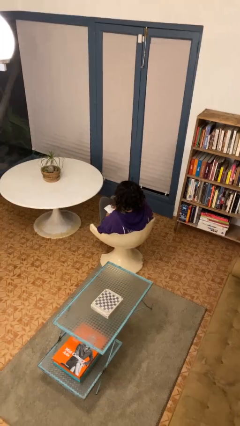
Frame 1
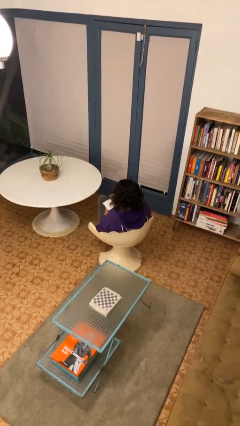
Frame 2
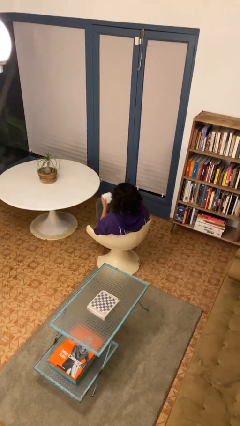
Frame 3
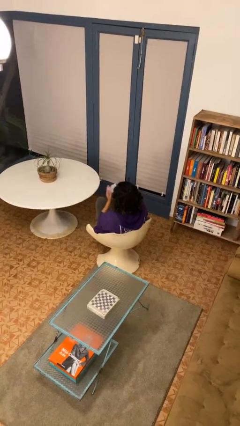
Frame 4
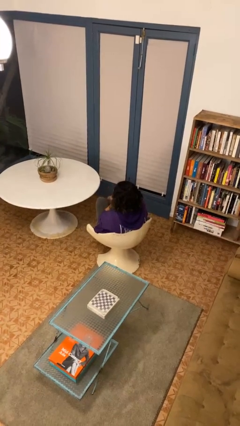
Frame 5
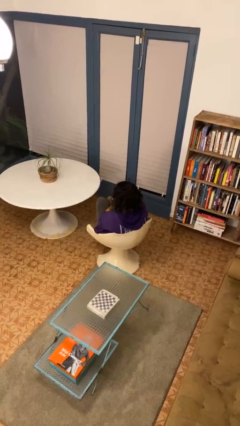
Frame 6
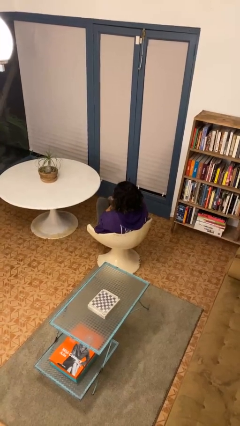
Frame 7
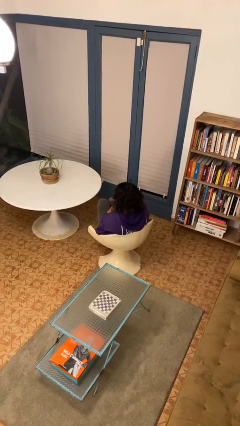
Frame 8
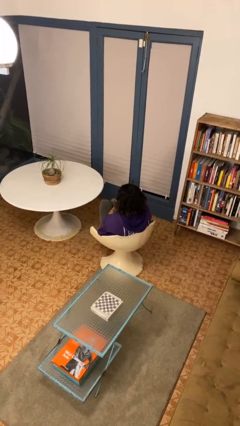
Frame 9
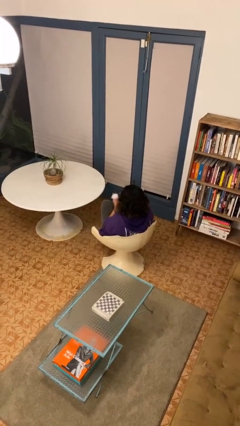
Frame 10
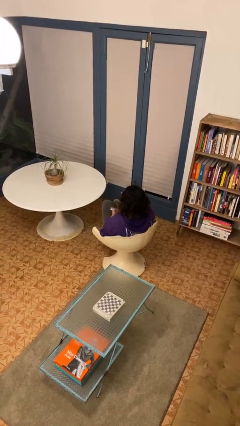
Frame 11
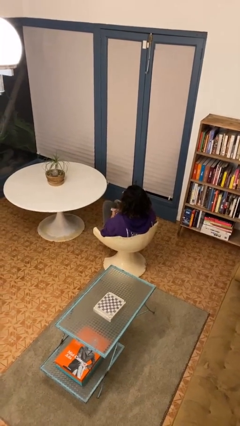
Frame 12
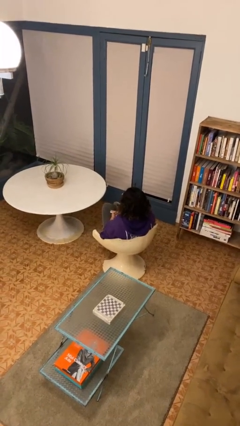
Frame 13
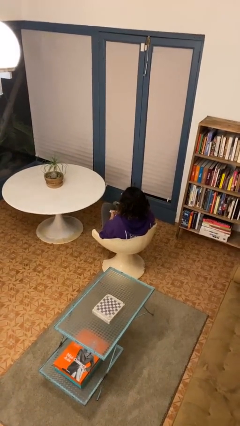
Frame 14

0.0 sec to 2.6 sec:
person blows nose

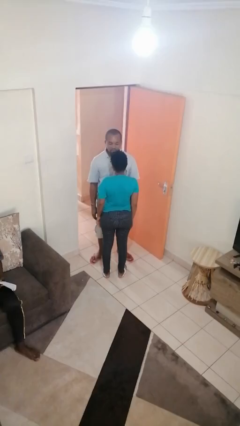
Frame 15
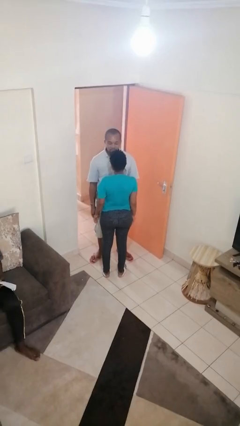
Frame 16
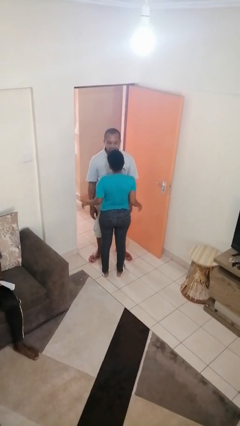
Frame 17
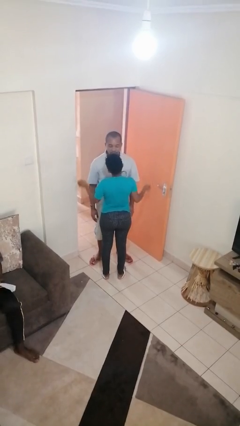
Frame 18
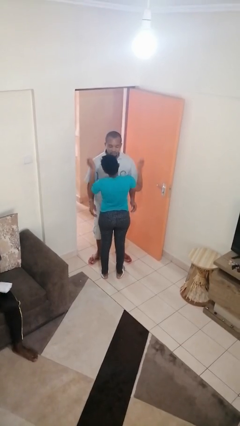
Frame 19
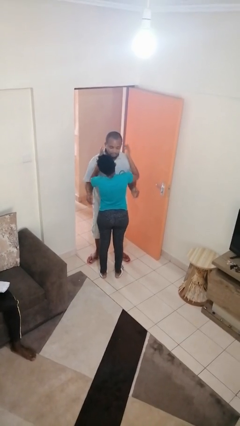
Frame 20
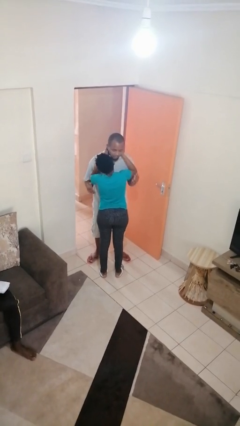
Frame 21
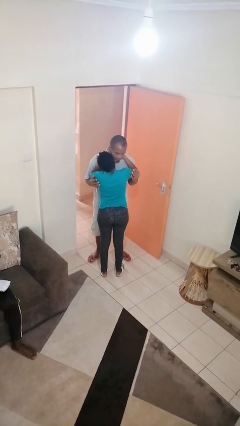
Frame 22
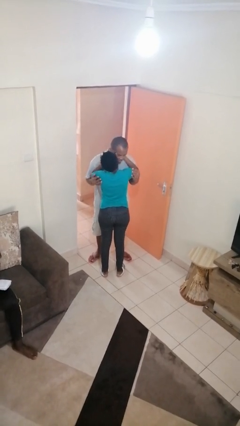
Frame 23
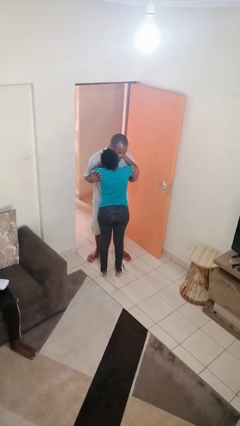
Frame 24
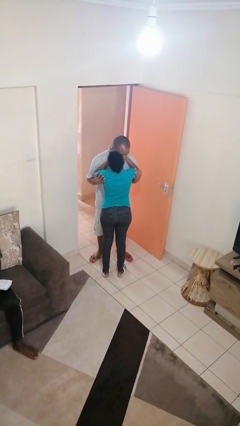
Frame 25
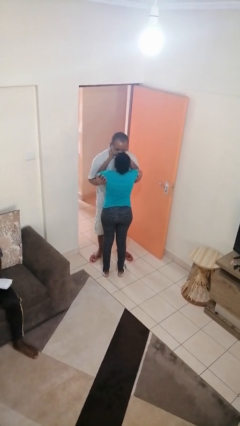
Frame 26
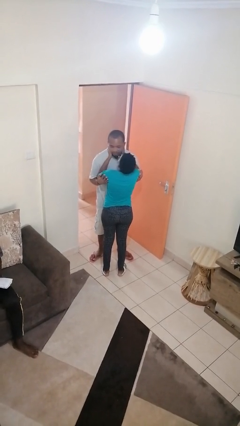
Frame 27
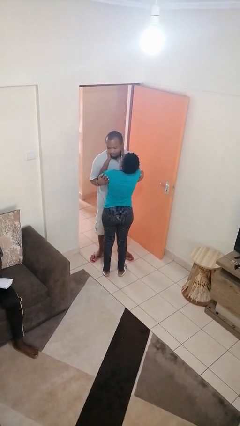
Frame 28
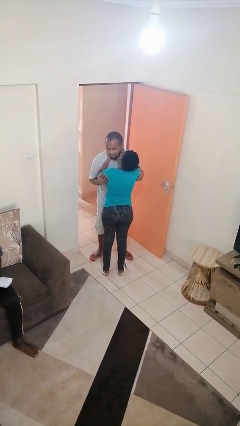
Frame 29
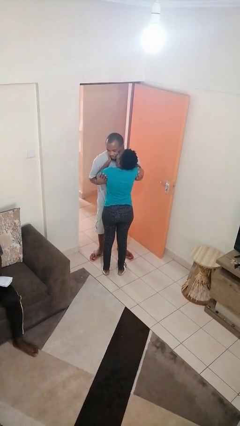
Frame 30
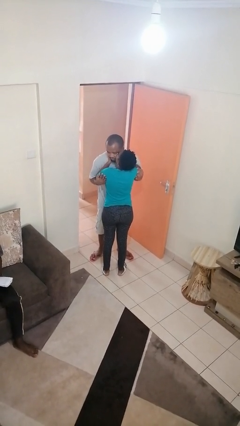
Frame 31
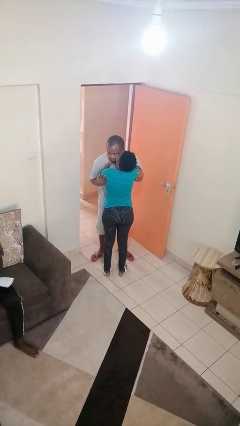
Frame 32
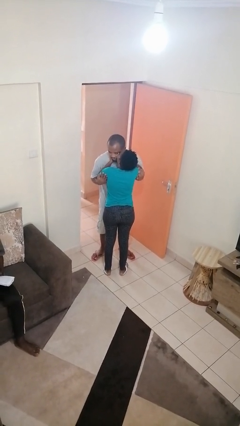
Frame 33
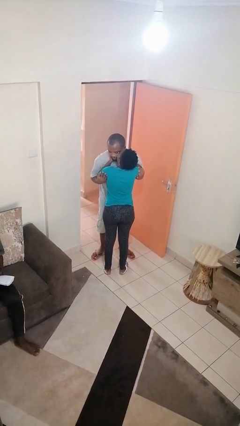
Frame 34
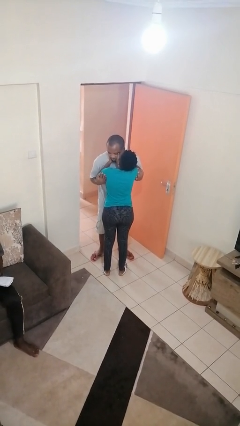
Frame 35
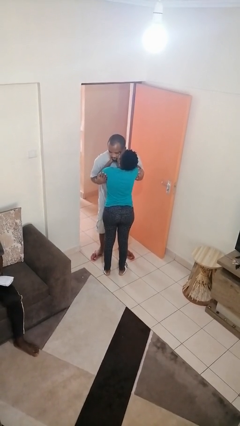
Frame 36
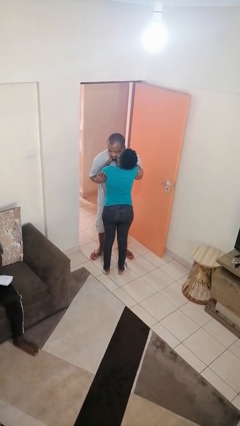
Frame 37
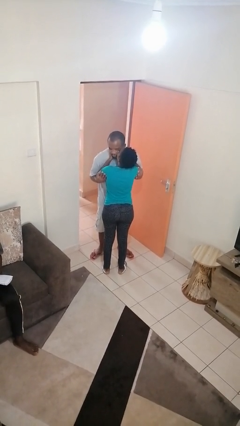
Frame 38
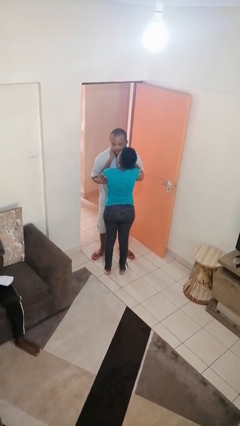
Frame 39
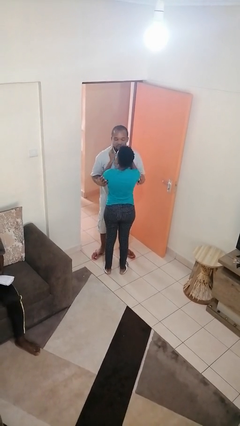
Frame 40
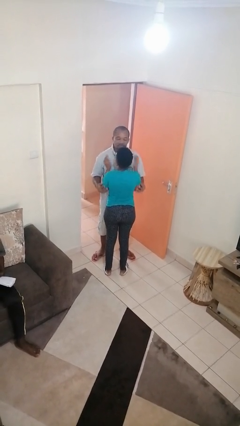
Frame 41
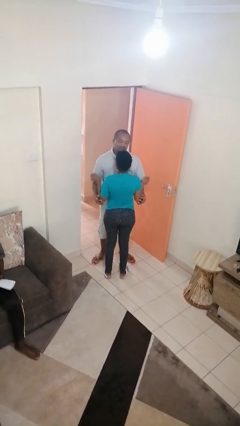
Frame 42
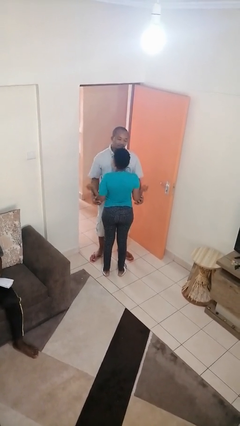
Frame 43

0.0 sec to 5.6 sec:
person kisses cheek of person

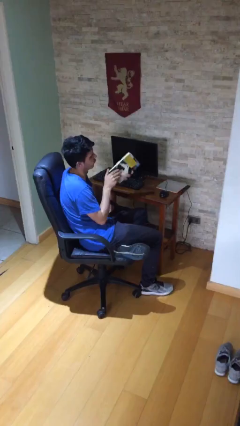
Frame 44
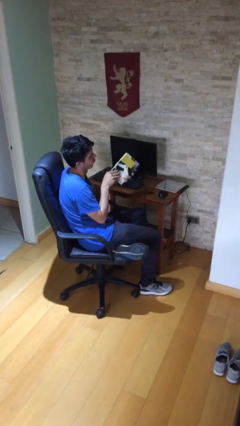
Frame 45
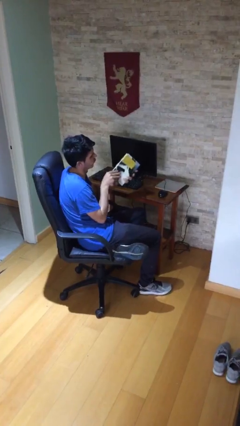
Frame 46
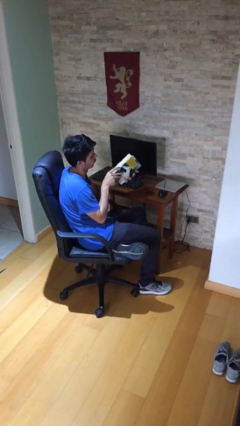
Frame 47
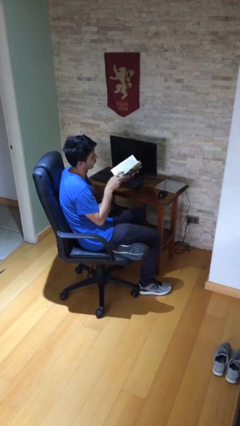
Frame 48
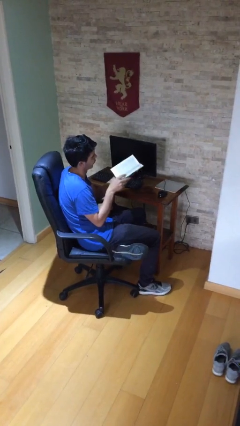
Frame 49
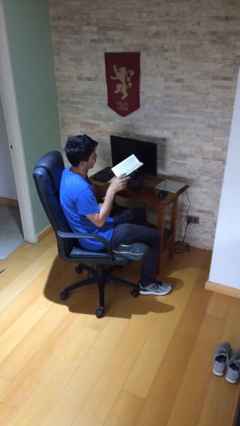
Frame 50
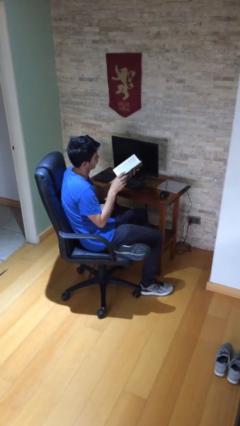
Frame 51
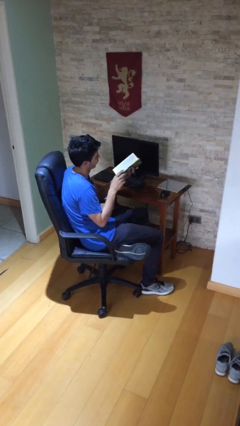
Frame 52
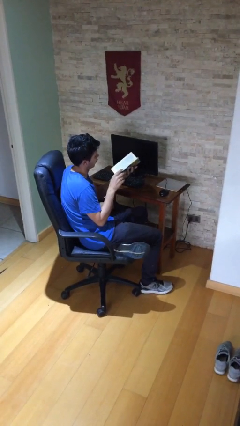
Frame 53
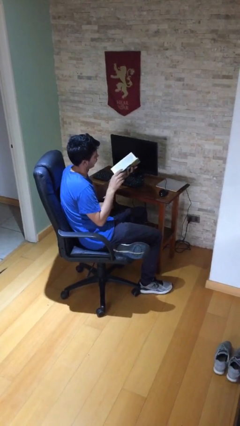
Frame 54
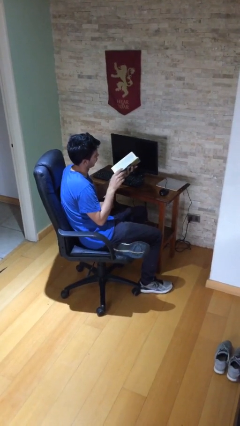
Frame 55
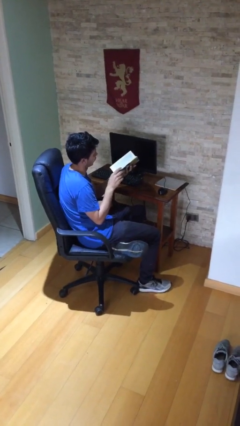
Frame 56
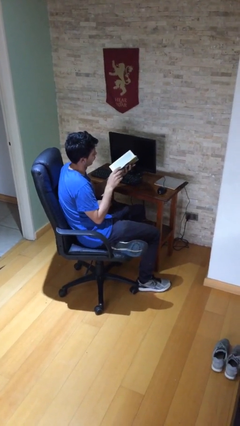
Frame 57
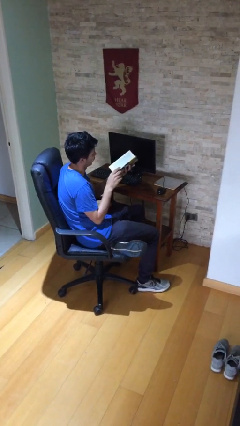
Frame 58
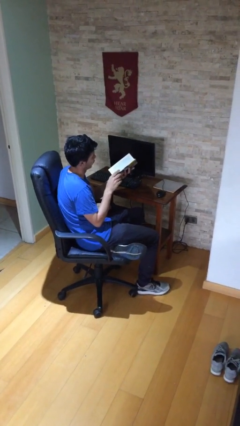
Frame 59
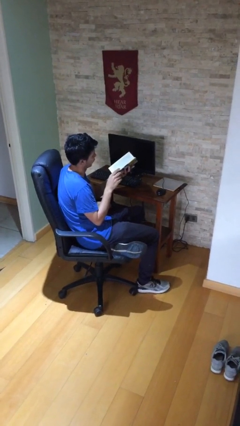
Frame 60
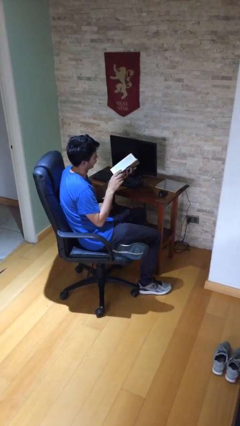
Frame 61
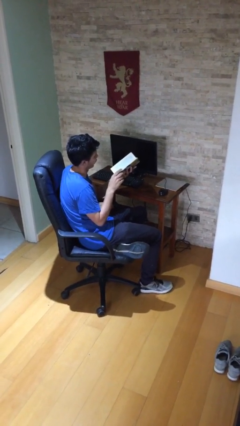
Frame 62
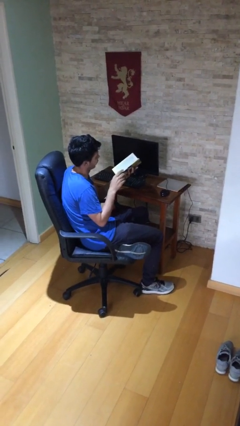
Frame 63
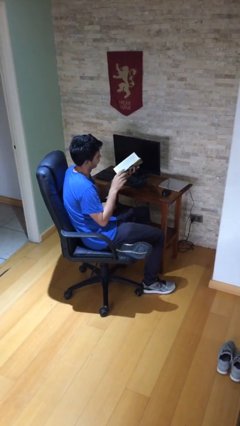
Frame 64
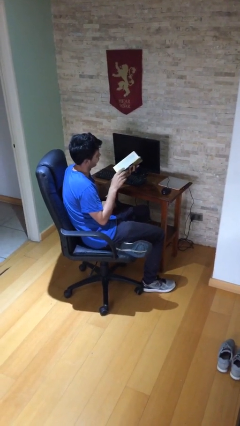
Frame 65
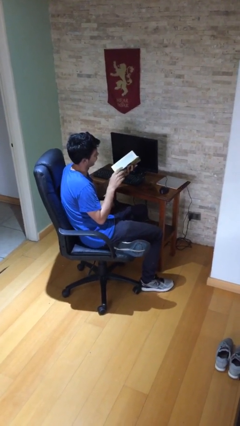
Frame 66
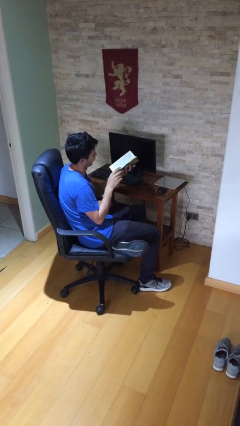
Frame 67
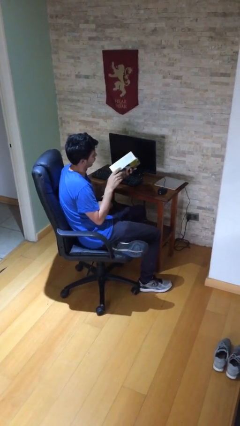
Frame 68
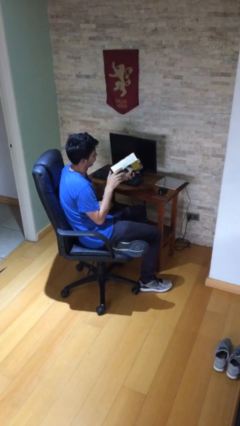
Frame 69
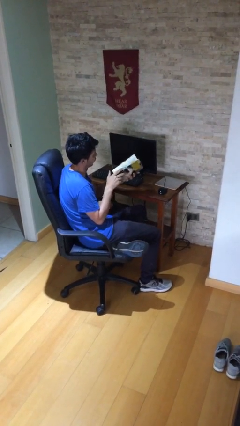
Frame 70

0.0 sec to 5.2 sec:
person reads document

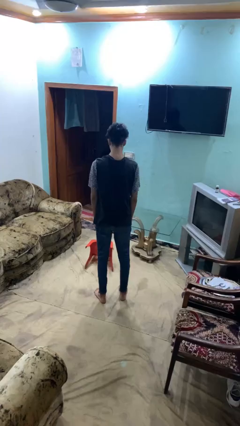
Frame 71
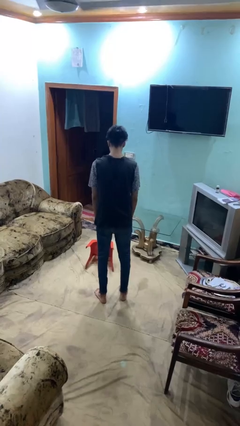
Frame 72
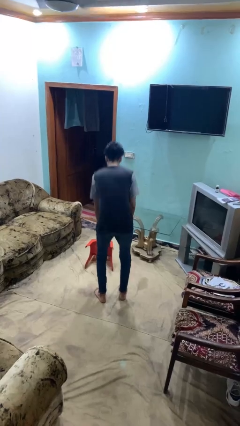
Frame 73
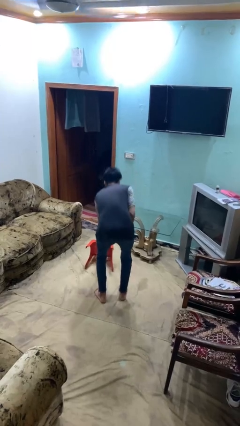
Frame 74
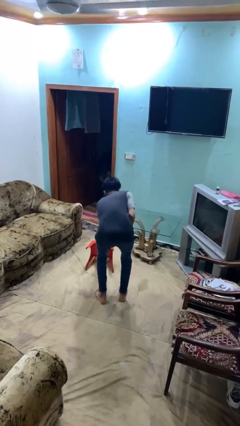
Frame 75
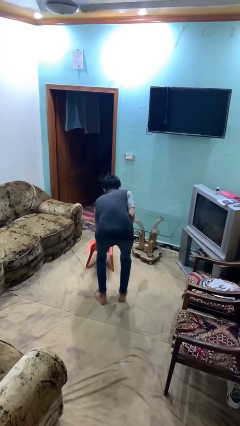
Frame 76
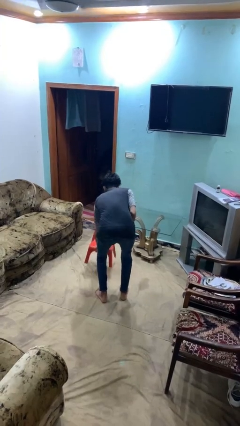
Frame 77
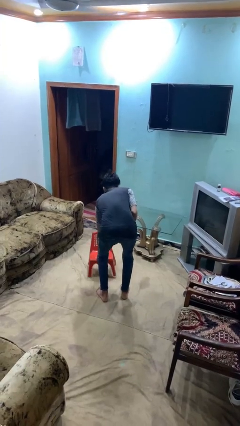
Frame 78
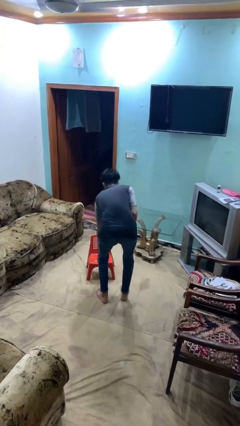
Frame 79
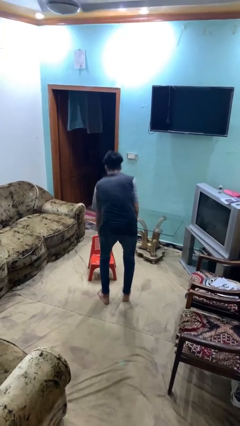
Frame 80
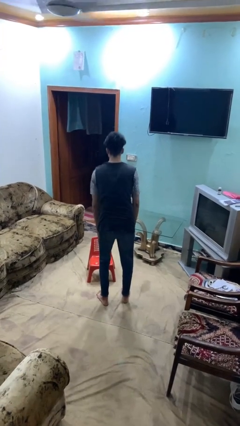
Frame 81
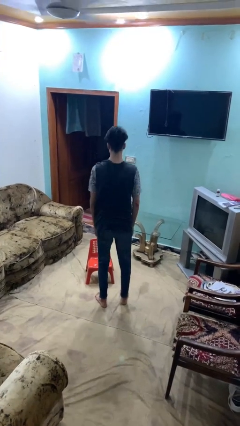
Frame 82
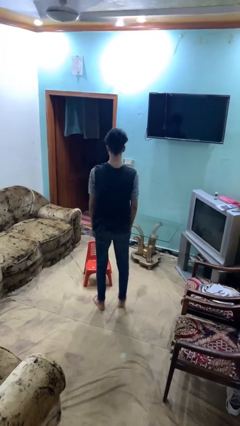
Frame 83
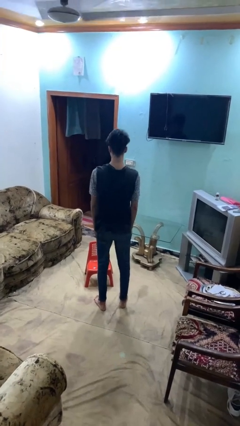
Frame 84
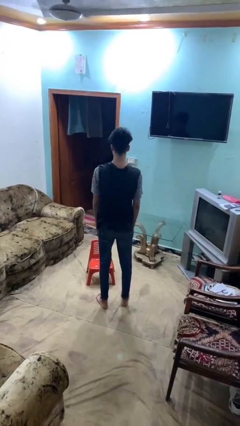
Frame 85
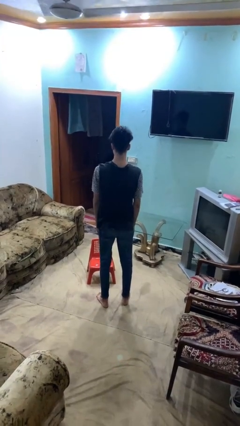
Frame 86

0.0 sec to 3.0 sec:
person sets upright furniture

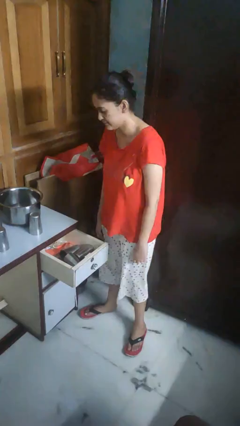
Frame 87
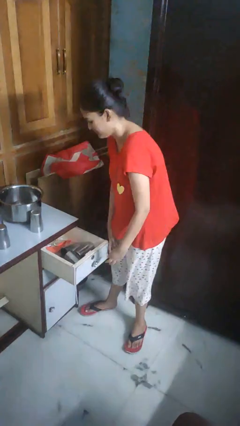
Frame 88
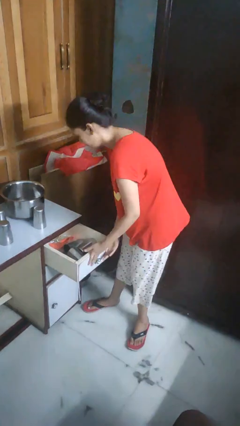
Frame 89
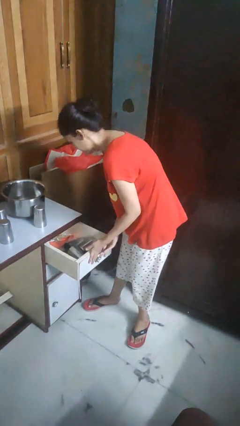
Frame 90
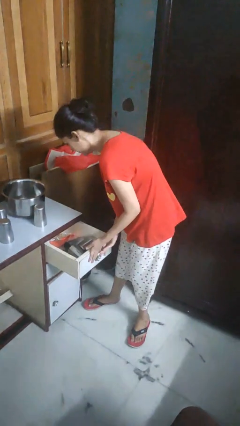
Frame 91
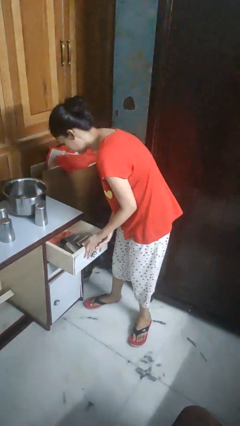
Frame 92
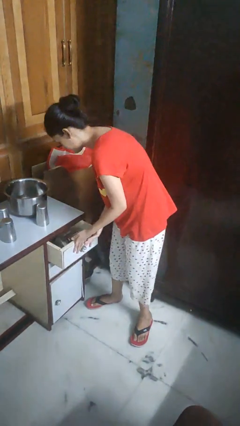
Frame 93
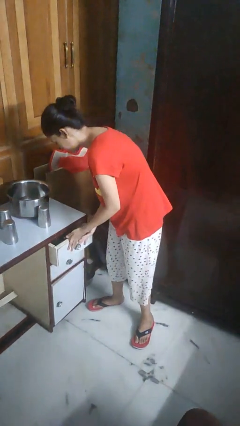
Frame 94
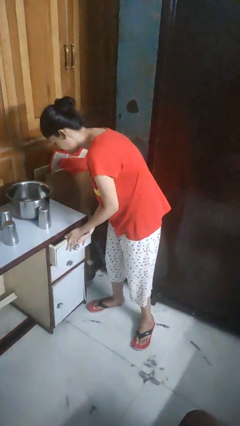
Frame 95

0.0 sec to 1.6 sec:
person closes kitchen drawer
